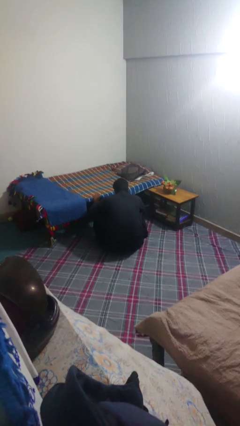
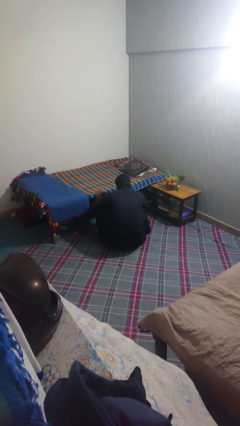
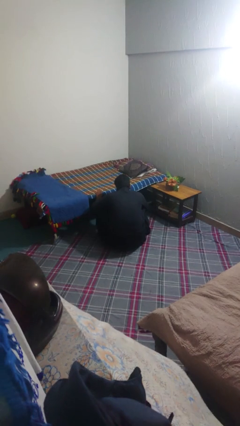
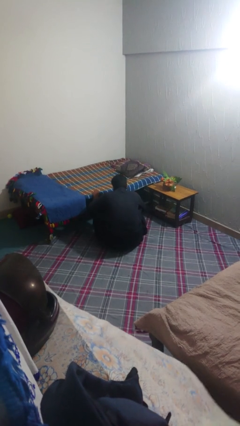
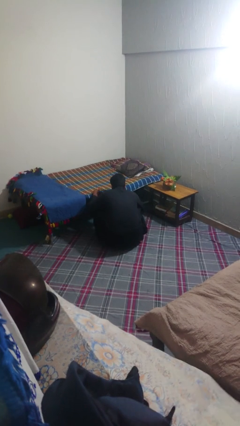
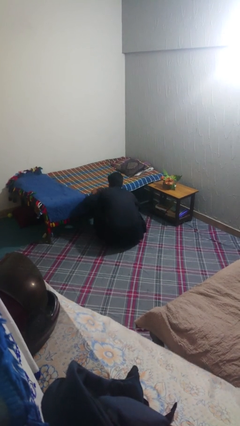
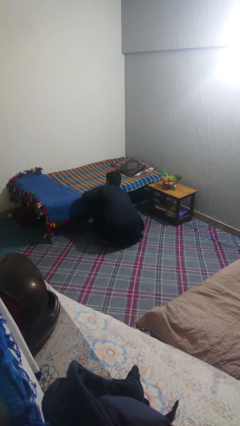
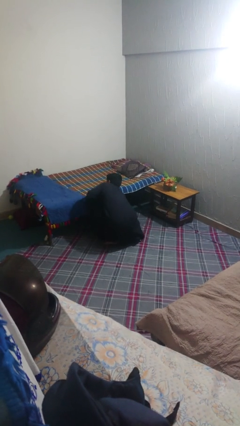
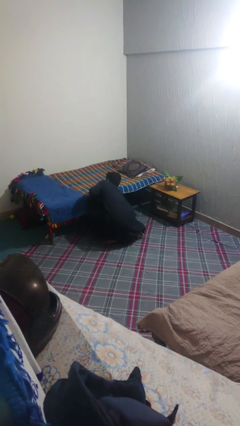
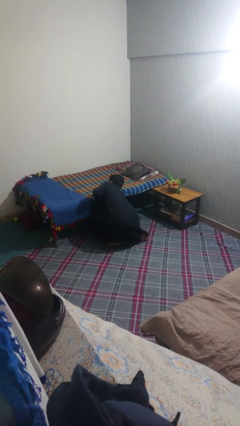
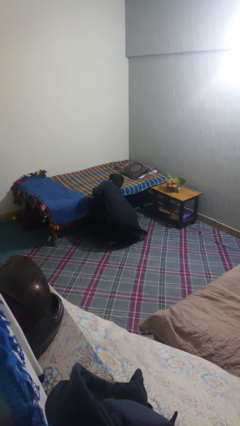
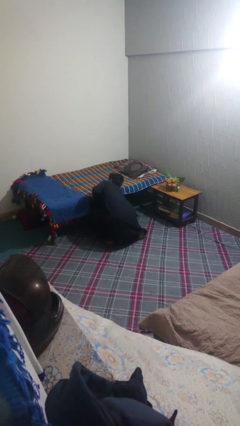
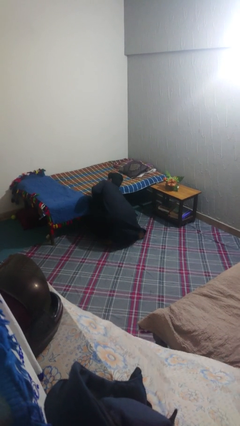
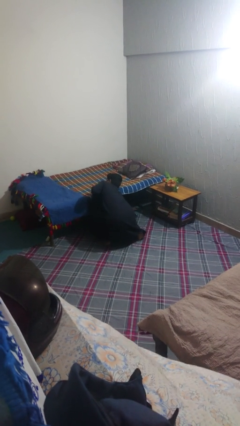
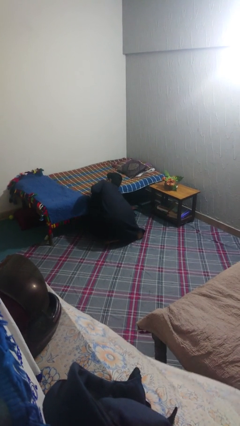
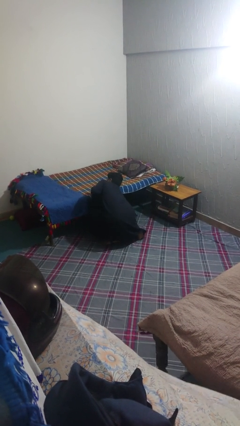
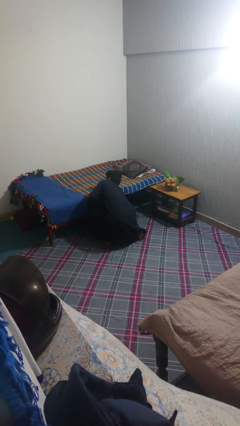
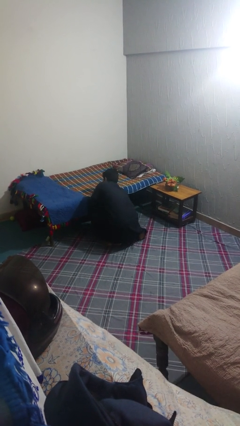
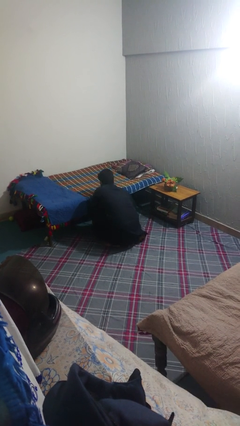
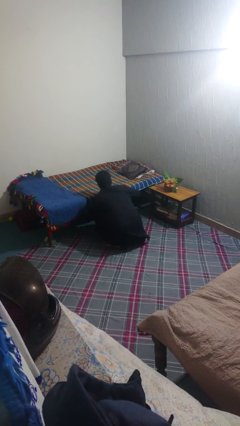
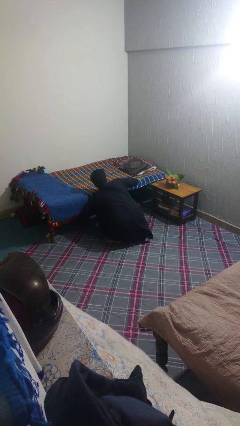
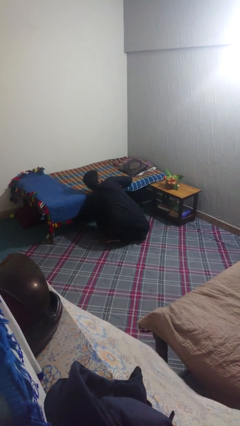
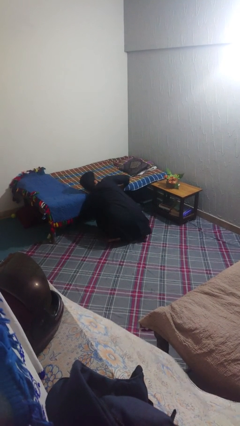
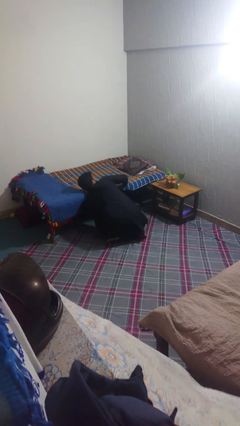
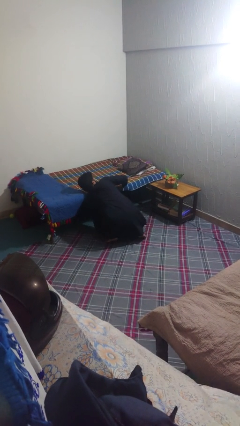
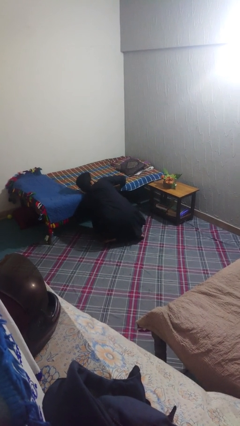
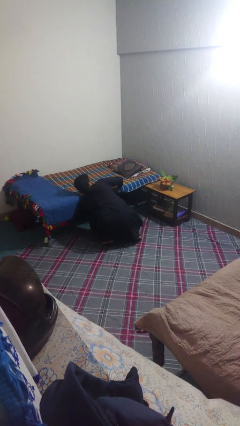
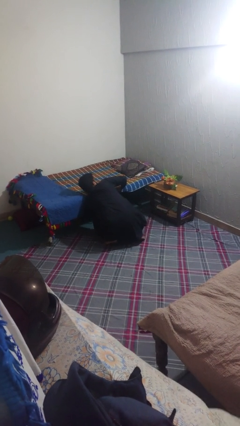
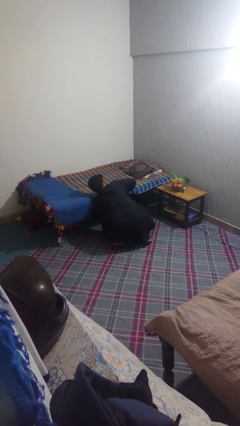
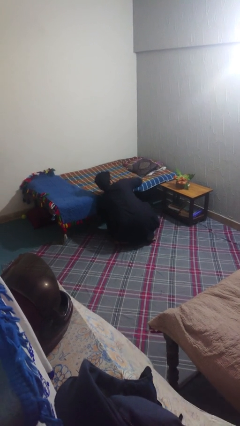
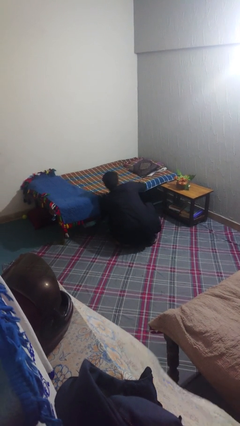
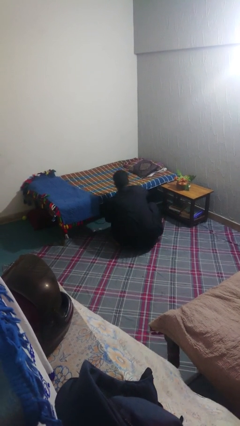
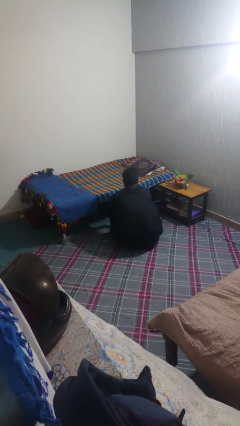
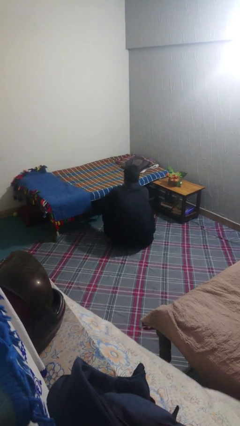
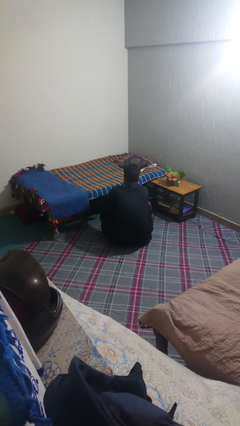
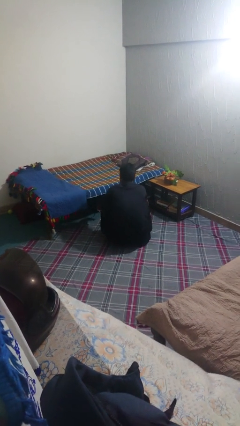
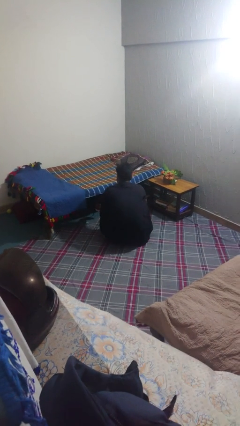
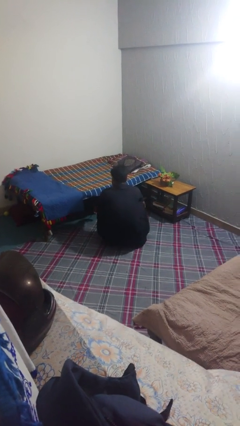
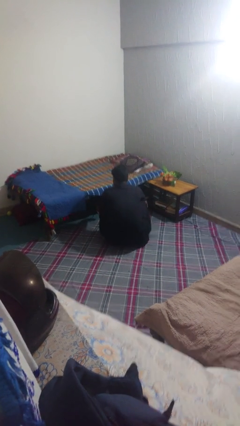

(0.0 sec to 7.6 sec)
person searches under bed

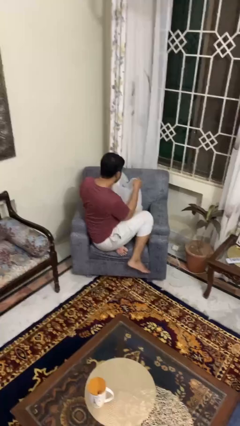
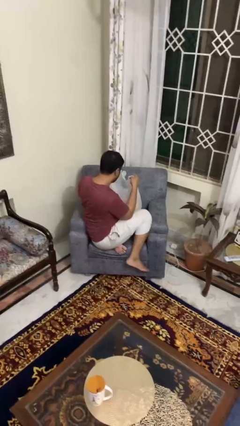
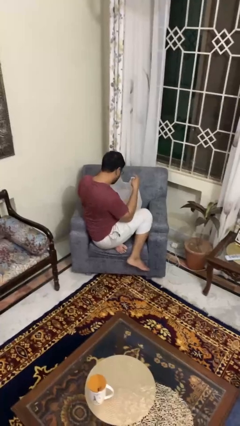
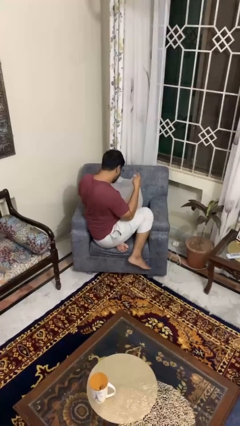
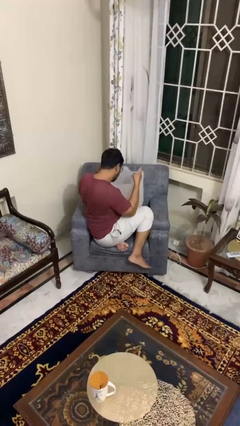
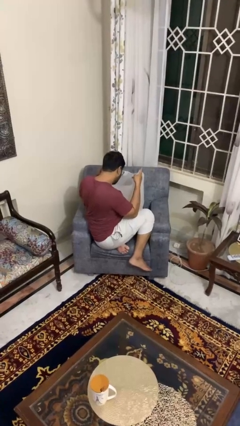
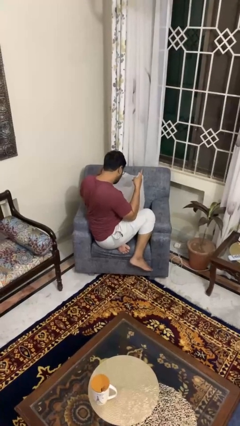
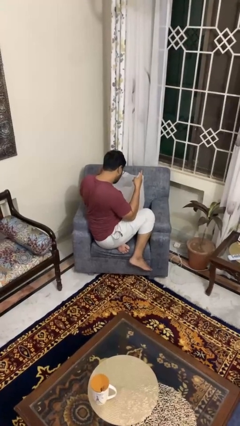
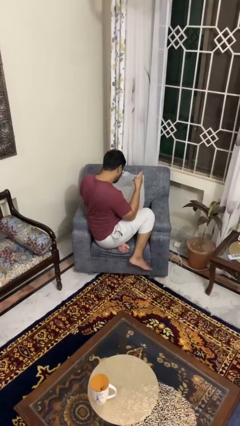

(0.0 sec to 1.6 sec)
person searches in bag

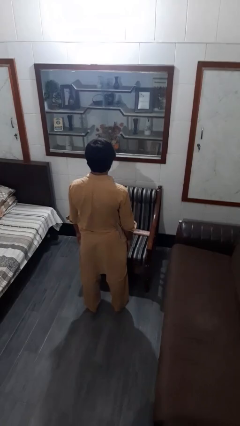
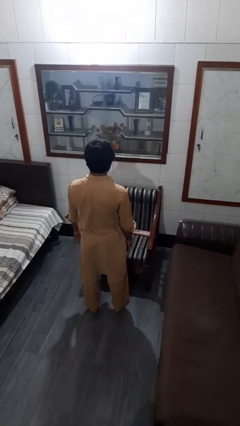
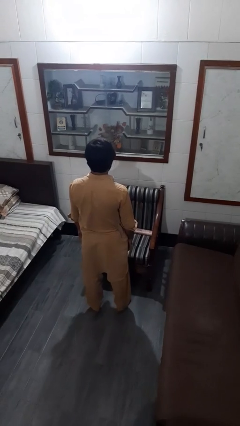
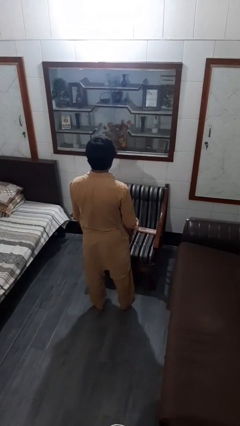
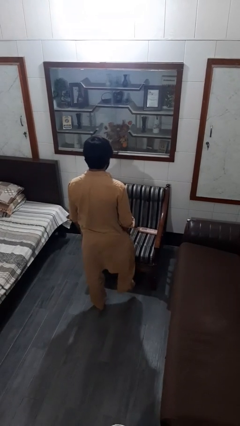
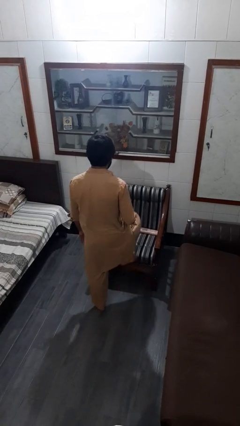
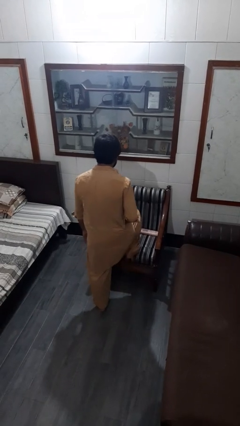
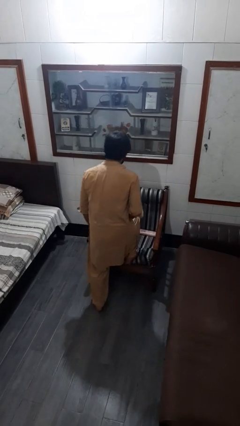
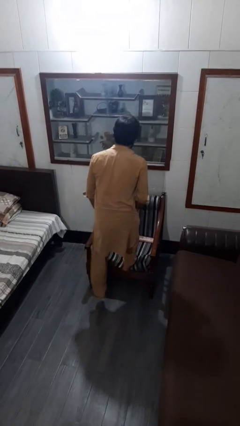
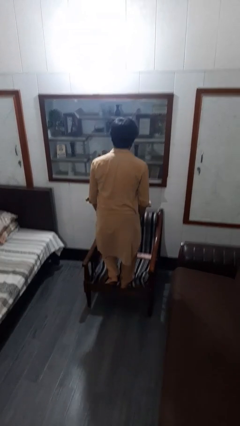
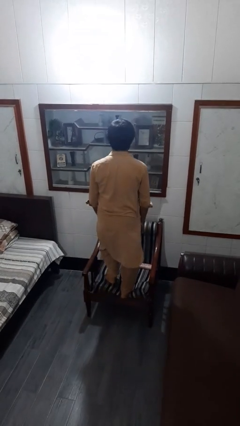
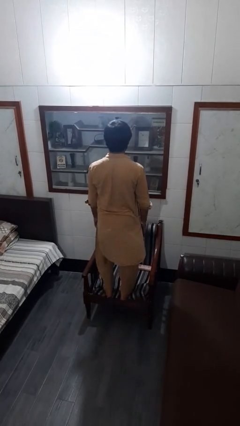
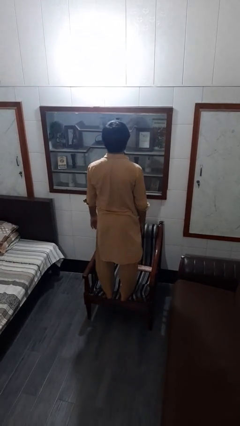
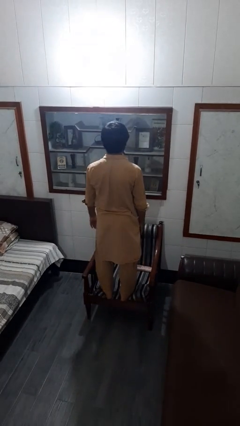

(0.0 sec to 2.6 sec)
person climbs on chair

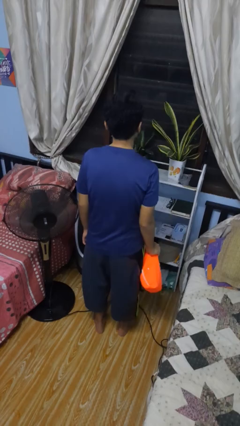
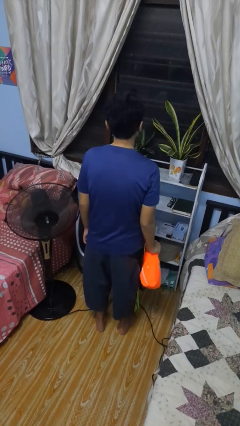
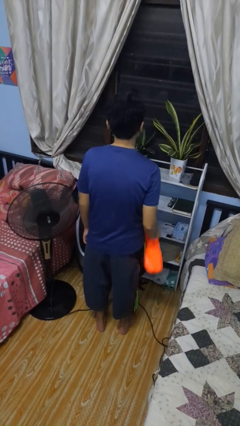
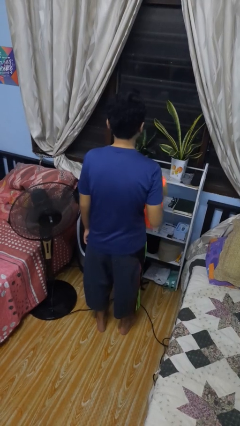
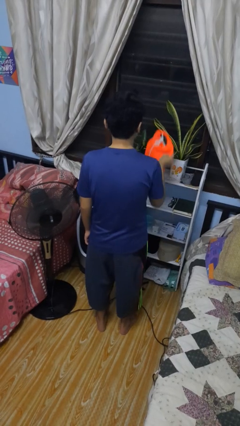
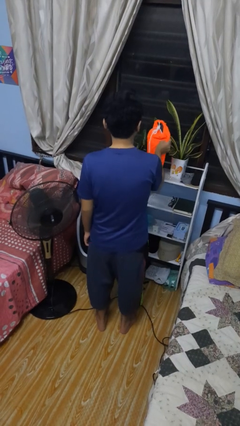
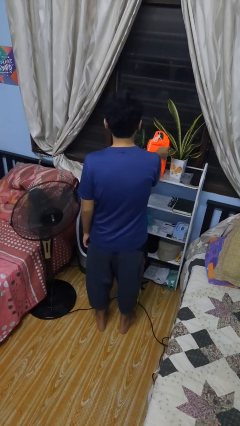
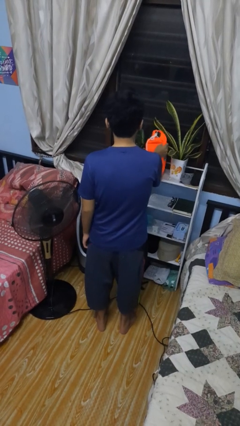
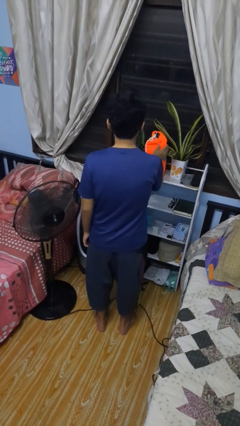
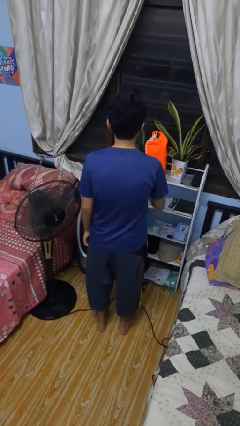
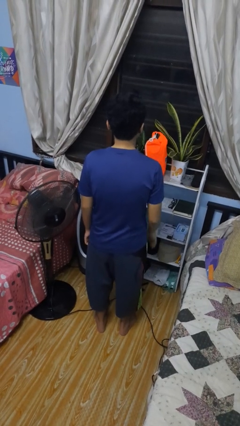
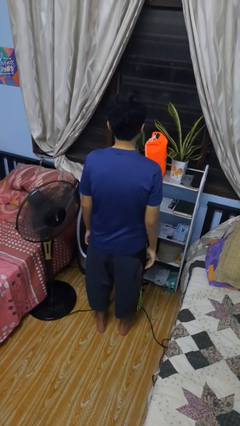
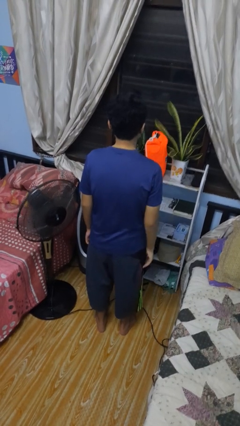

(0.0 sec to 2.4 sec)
person puts down object on countertop

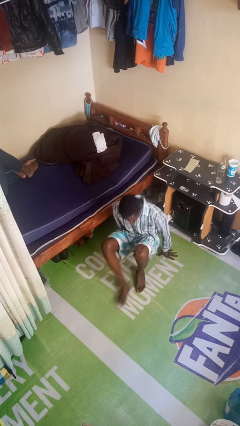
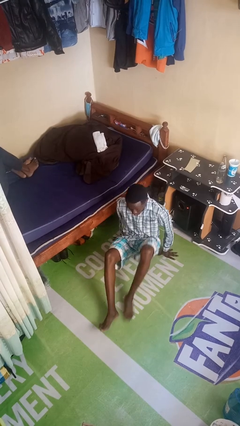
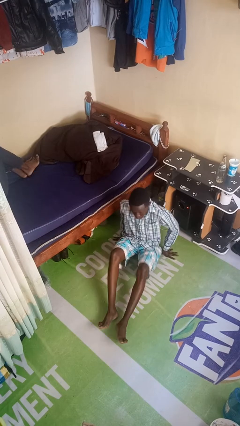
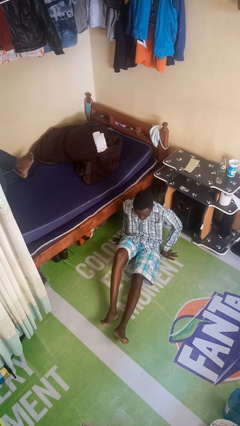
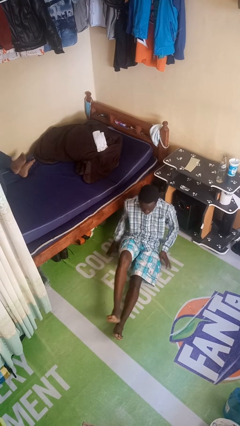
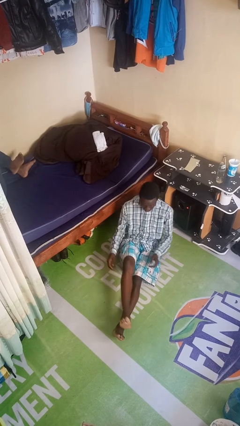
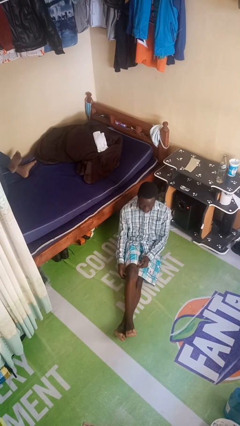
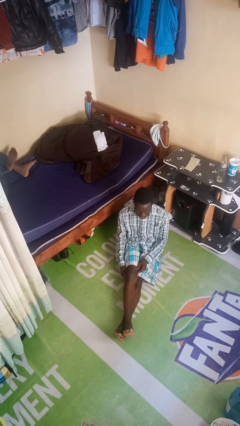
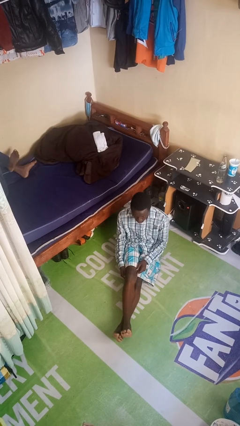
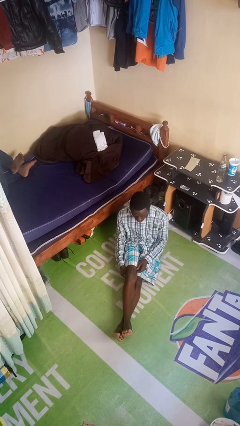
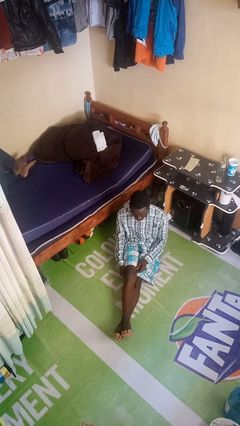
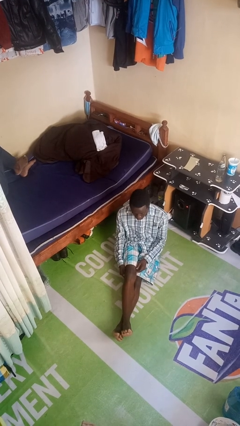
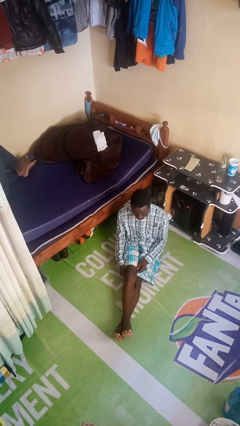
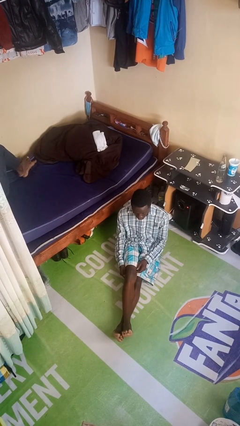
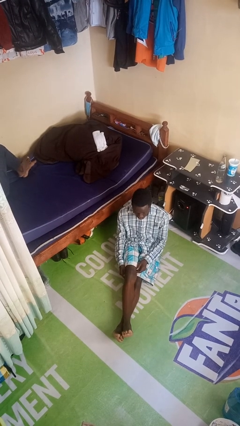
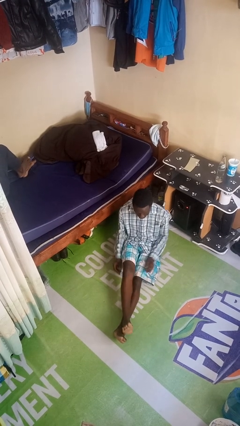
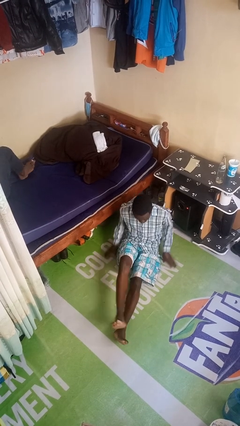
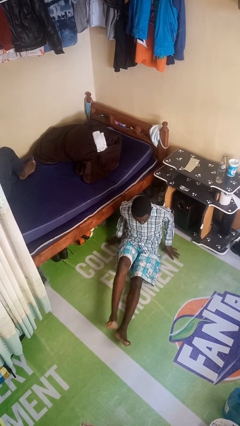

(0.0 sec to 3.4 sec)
person sits crisscross
